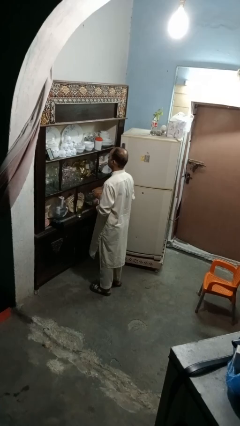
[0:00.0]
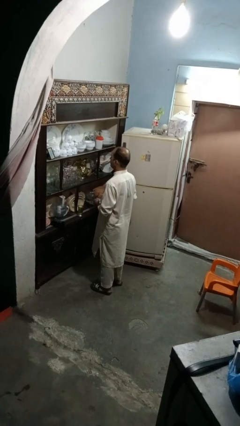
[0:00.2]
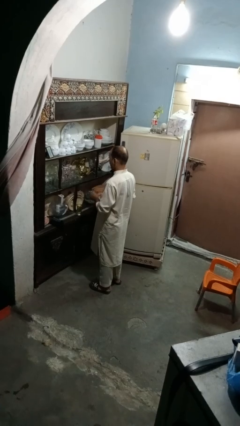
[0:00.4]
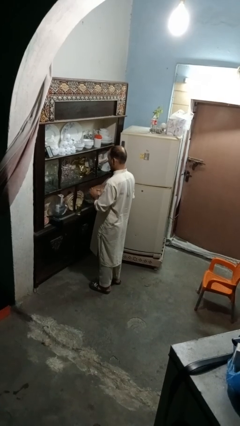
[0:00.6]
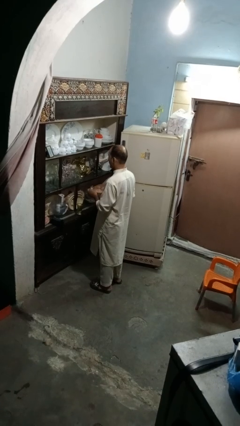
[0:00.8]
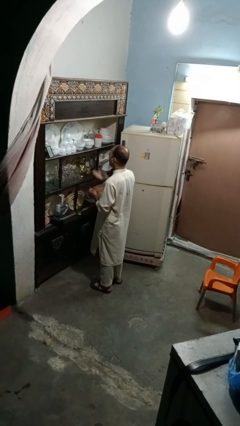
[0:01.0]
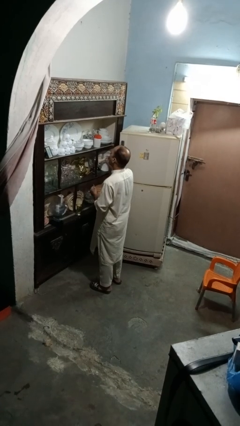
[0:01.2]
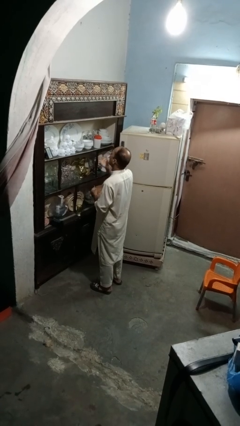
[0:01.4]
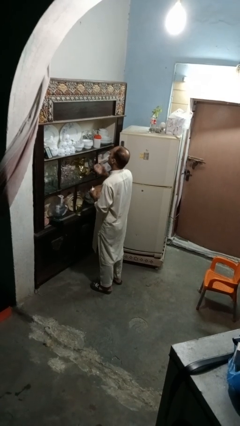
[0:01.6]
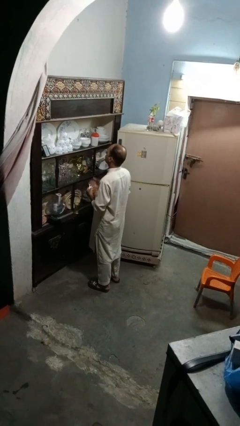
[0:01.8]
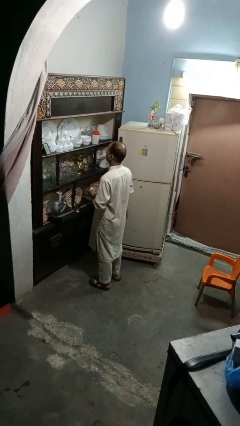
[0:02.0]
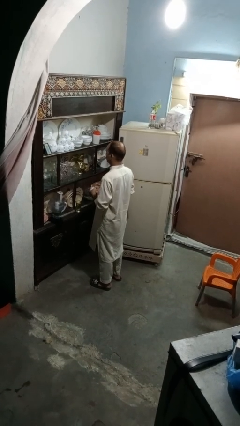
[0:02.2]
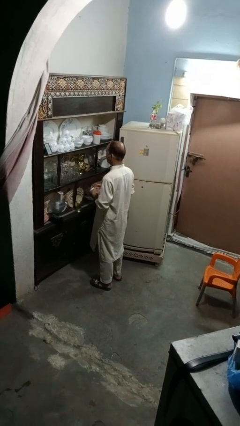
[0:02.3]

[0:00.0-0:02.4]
person takes medicine pills

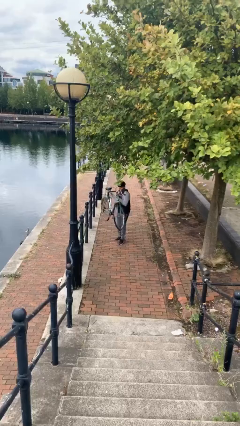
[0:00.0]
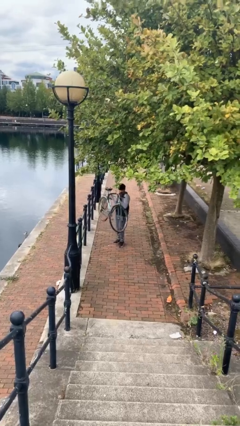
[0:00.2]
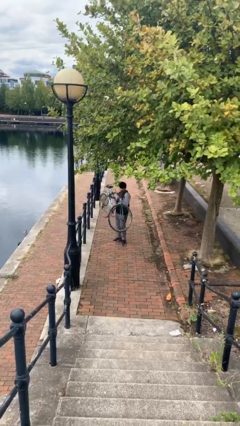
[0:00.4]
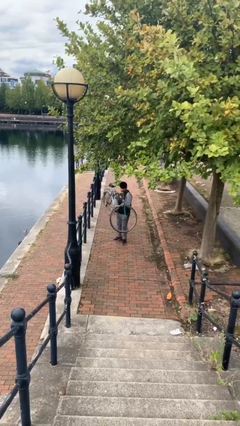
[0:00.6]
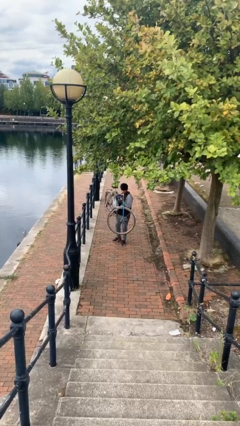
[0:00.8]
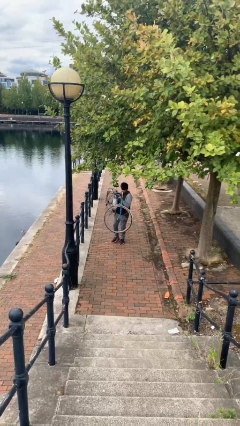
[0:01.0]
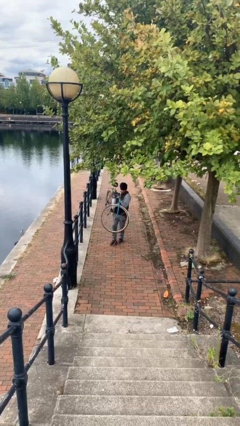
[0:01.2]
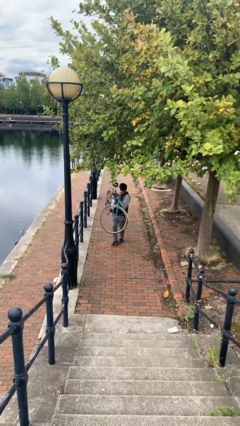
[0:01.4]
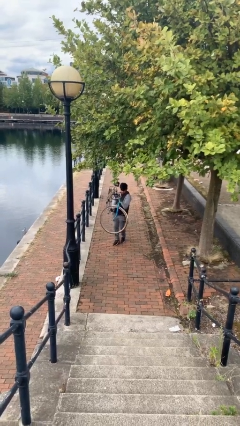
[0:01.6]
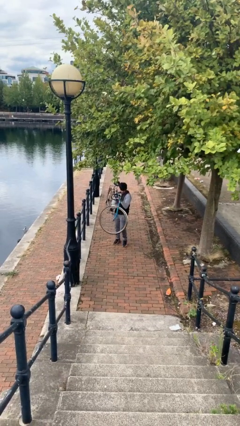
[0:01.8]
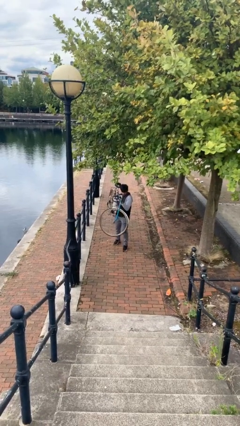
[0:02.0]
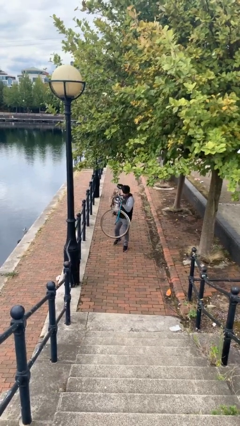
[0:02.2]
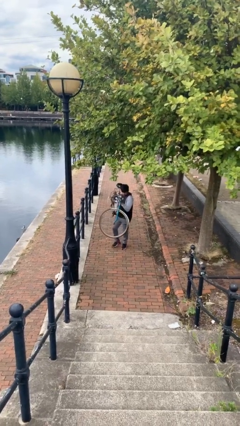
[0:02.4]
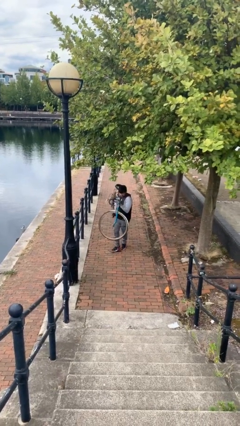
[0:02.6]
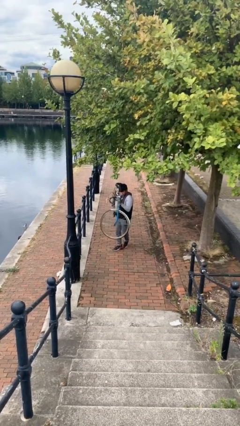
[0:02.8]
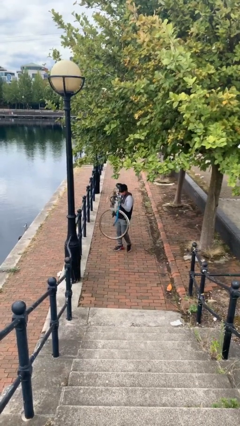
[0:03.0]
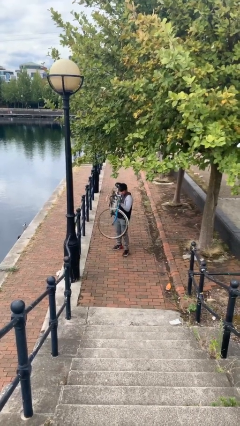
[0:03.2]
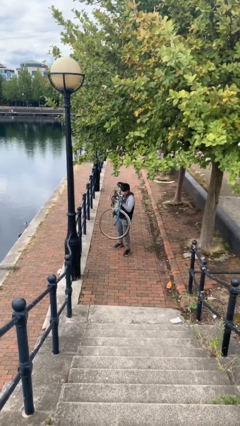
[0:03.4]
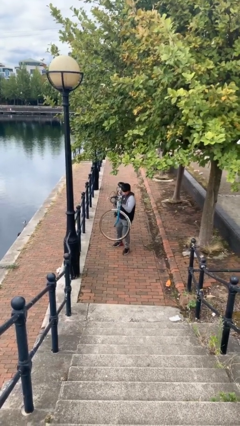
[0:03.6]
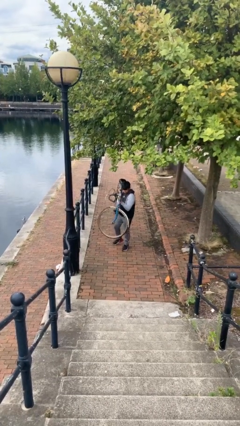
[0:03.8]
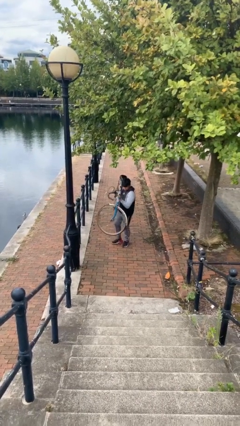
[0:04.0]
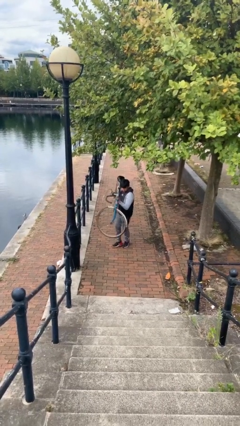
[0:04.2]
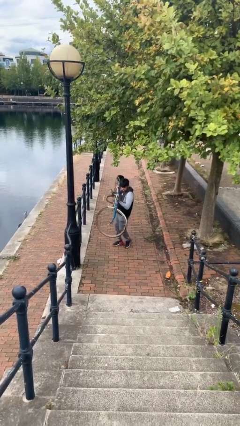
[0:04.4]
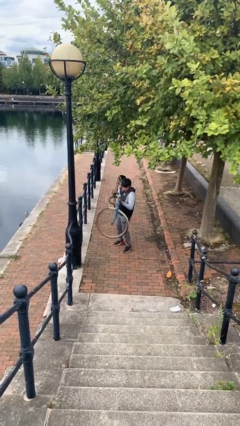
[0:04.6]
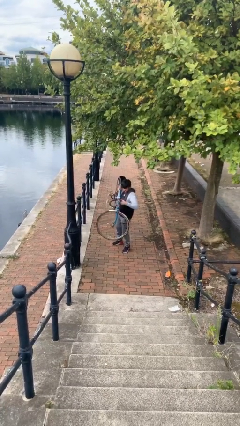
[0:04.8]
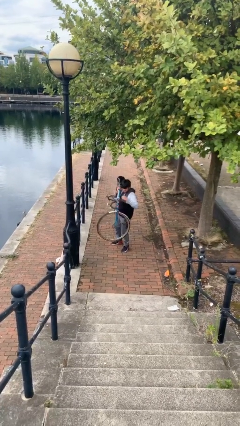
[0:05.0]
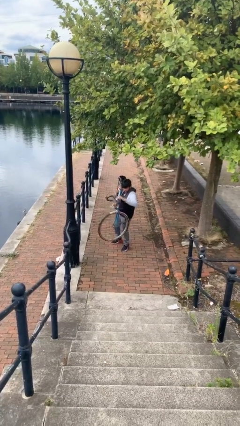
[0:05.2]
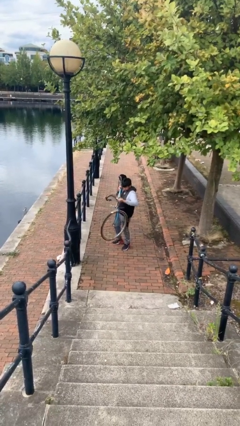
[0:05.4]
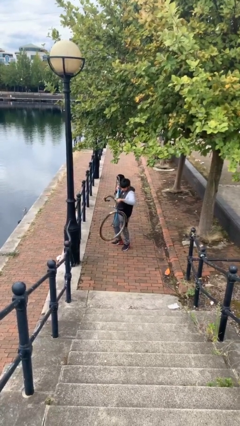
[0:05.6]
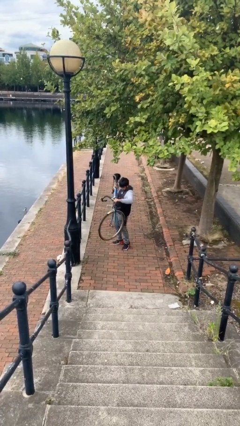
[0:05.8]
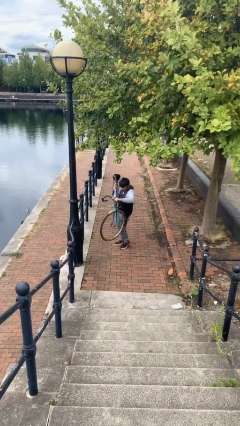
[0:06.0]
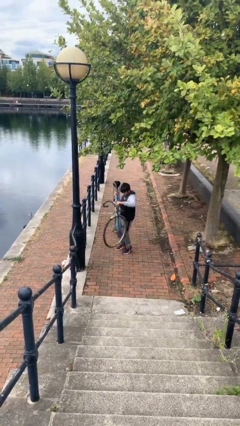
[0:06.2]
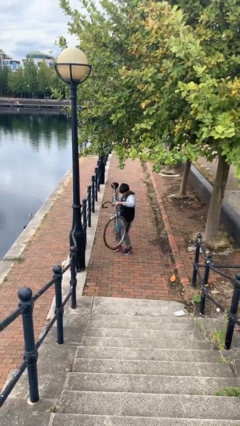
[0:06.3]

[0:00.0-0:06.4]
person carries heavy object

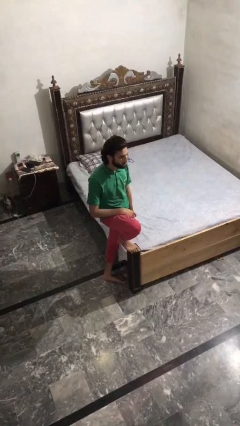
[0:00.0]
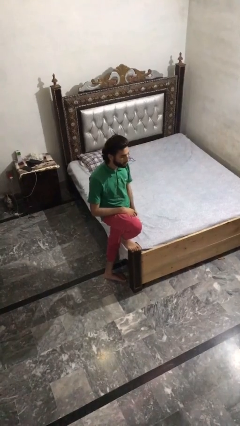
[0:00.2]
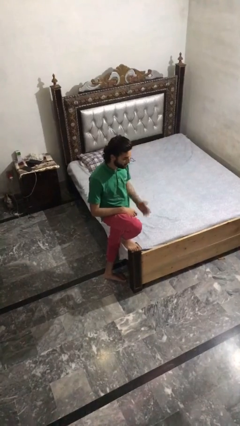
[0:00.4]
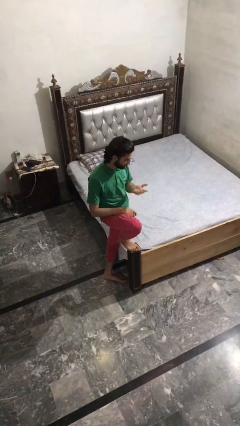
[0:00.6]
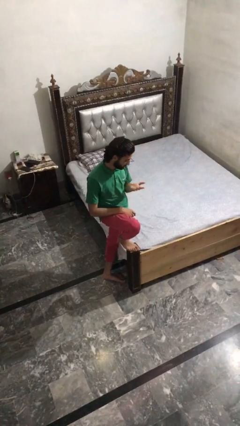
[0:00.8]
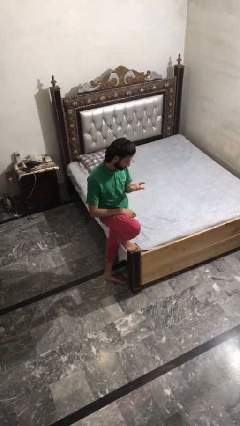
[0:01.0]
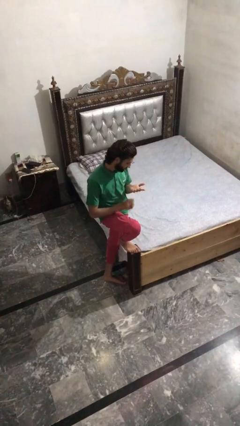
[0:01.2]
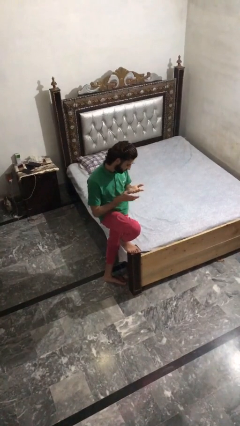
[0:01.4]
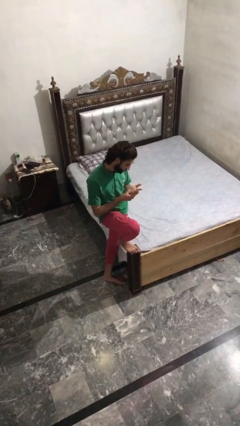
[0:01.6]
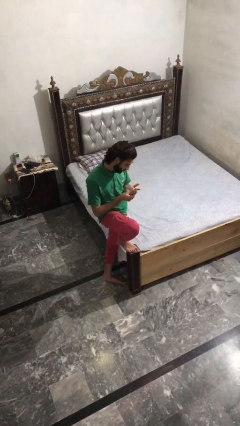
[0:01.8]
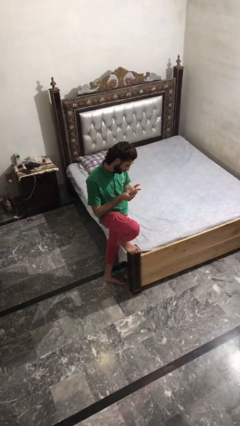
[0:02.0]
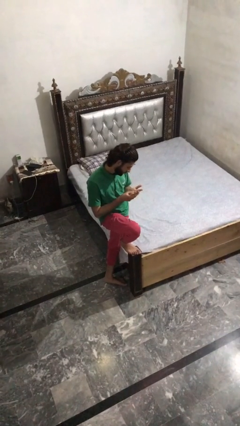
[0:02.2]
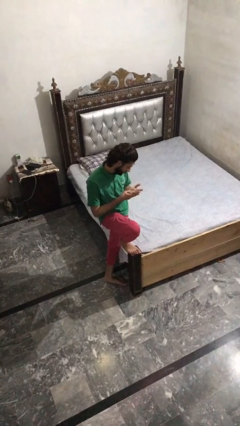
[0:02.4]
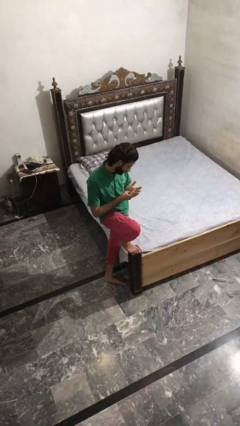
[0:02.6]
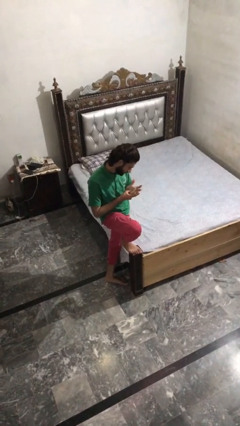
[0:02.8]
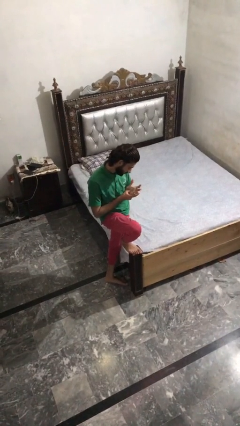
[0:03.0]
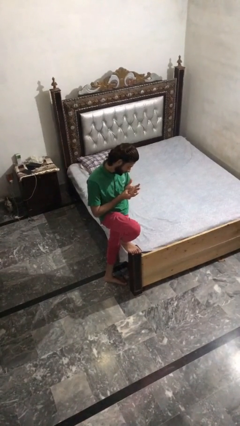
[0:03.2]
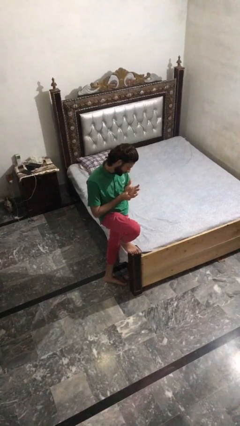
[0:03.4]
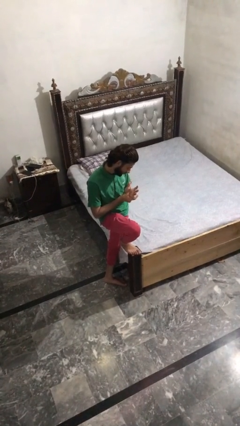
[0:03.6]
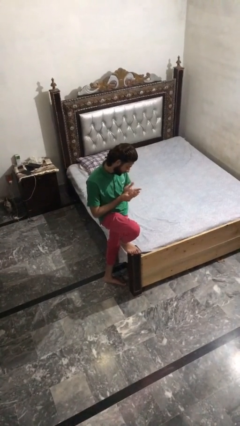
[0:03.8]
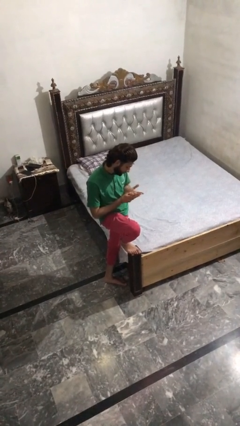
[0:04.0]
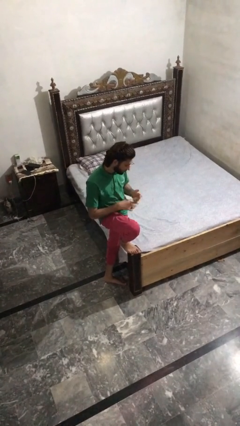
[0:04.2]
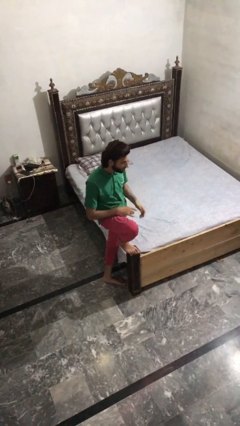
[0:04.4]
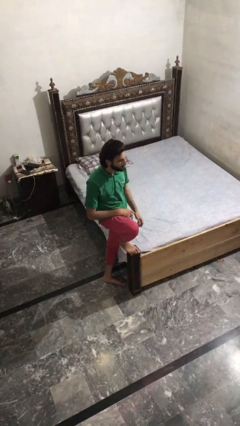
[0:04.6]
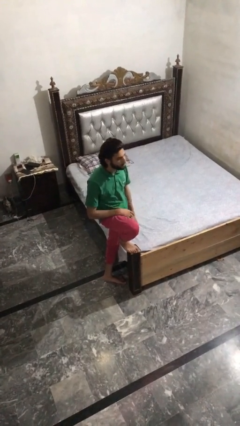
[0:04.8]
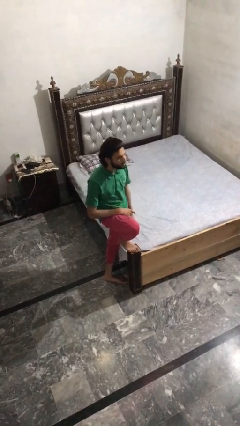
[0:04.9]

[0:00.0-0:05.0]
person looks at hands in lap

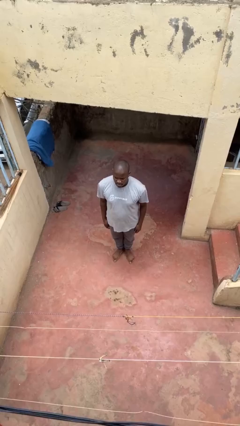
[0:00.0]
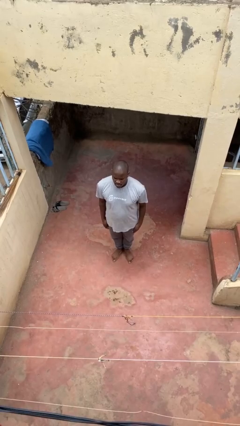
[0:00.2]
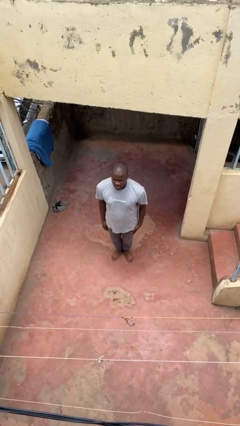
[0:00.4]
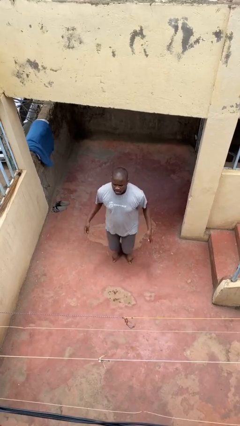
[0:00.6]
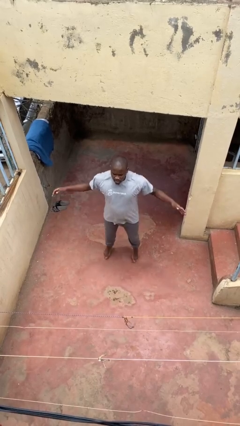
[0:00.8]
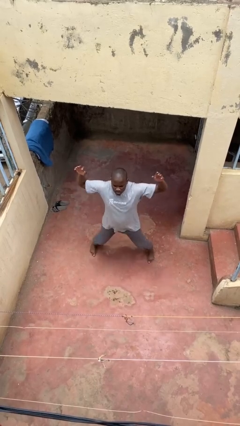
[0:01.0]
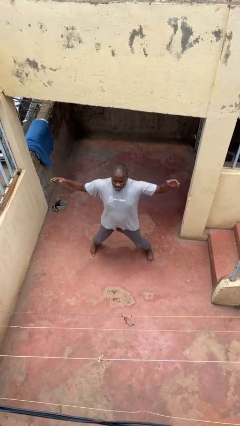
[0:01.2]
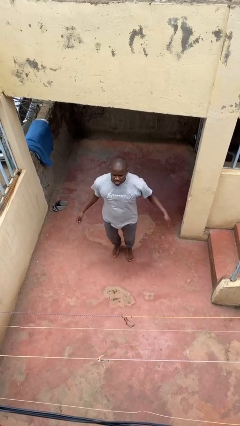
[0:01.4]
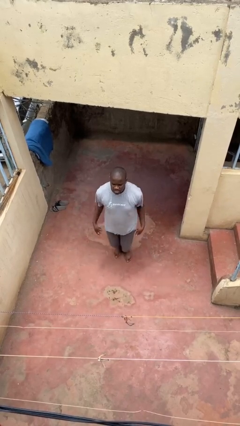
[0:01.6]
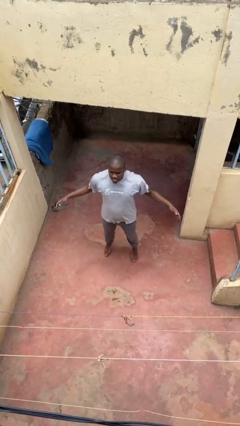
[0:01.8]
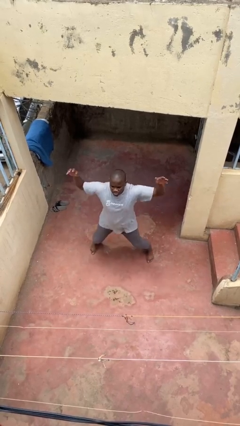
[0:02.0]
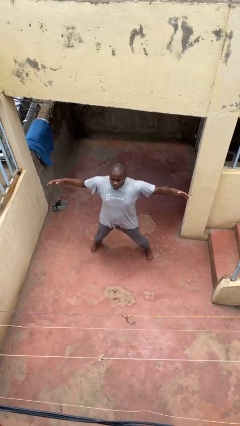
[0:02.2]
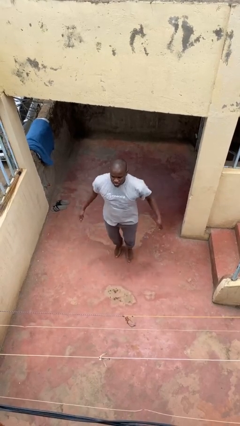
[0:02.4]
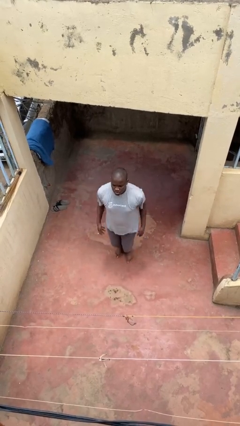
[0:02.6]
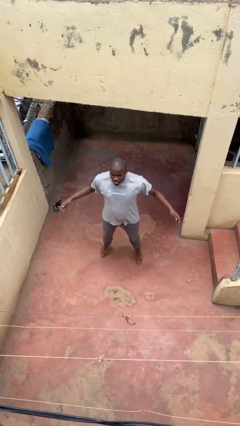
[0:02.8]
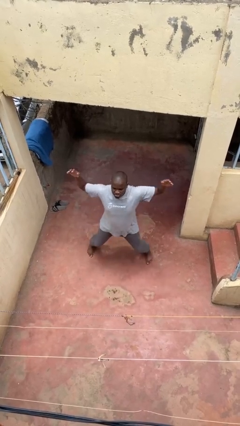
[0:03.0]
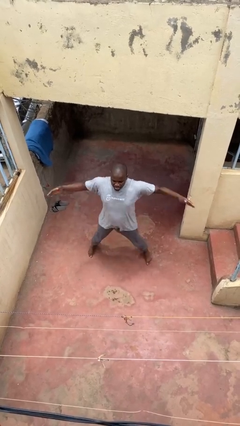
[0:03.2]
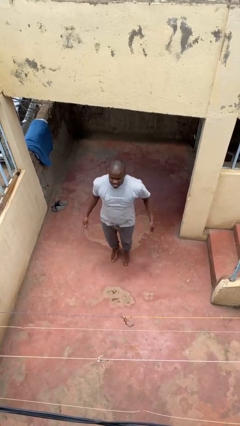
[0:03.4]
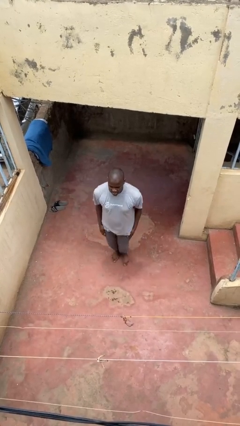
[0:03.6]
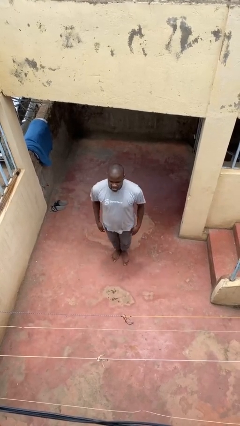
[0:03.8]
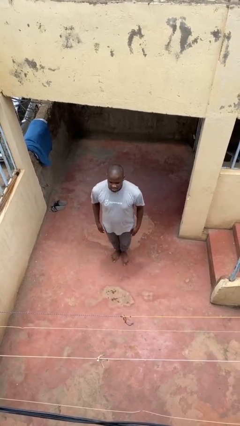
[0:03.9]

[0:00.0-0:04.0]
person exercises with jumping jacks

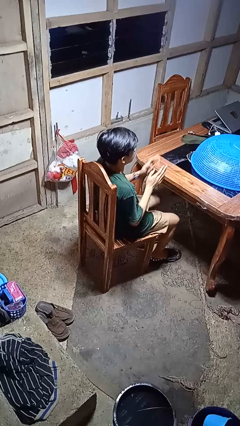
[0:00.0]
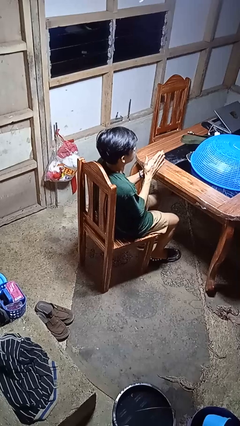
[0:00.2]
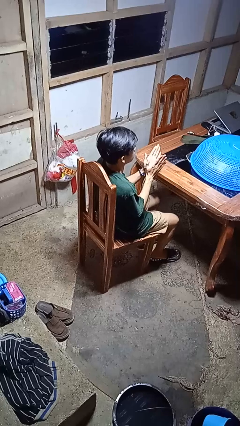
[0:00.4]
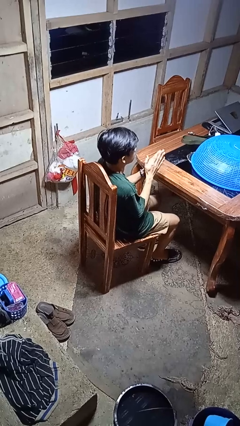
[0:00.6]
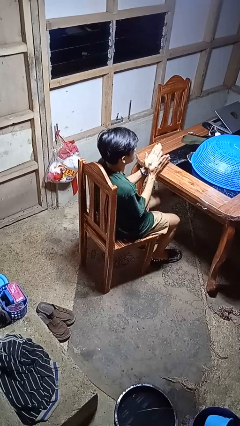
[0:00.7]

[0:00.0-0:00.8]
person claps hands
